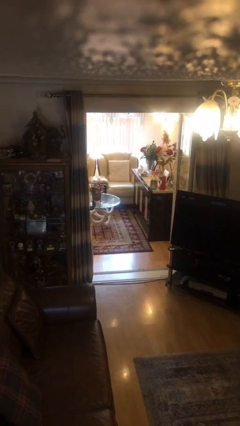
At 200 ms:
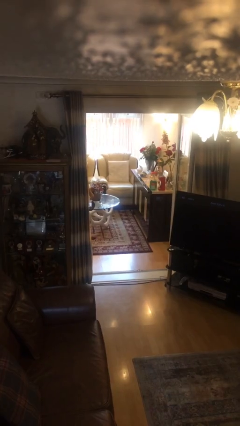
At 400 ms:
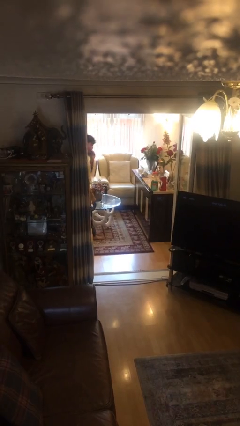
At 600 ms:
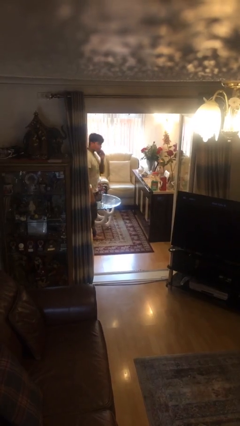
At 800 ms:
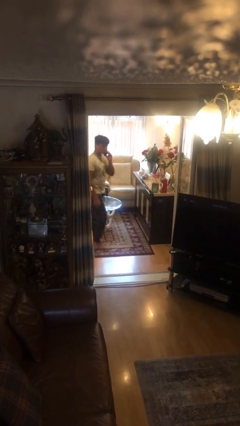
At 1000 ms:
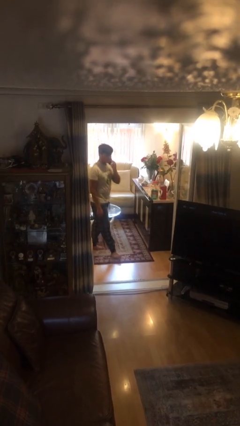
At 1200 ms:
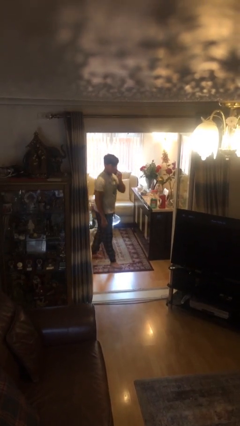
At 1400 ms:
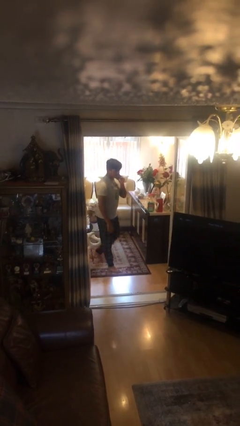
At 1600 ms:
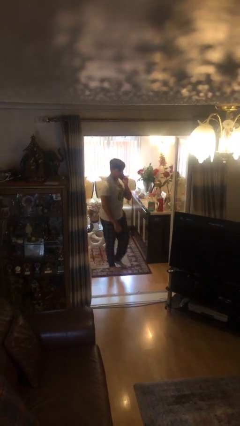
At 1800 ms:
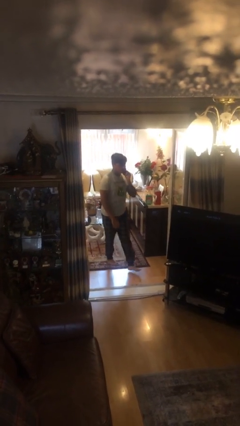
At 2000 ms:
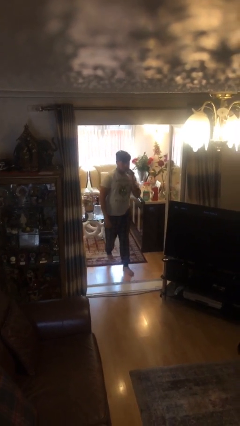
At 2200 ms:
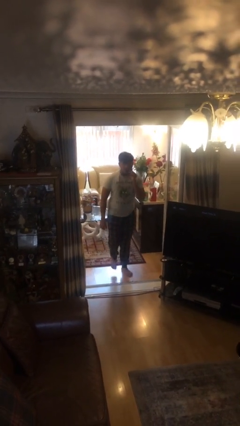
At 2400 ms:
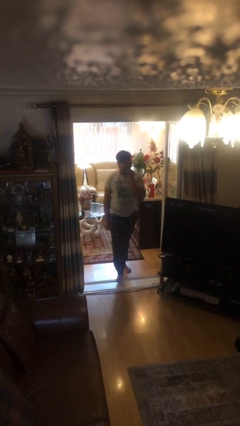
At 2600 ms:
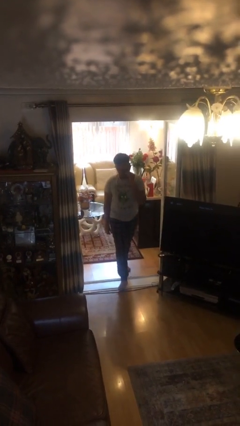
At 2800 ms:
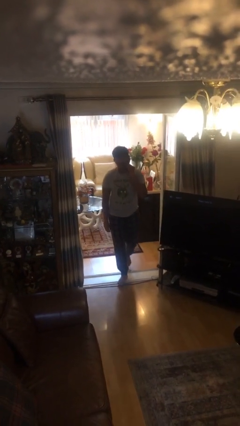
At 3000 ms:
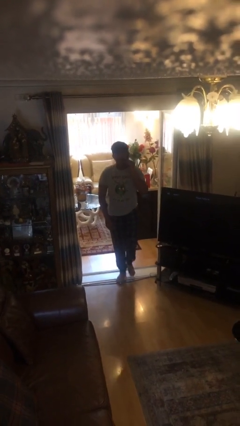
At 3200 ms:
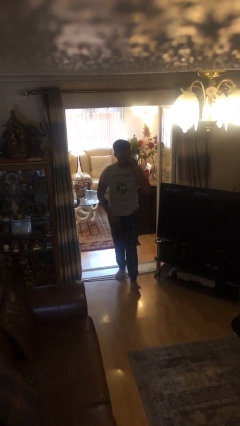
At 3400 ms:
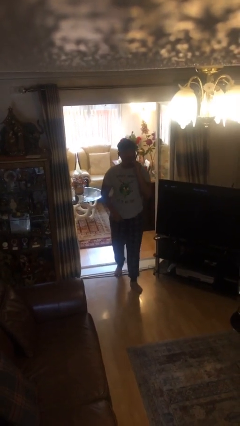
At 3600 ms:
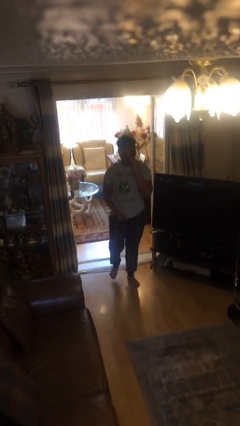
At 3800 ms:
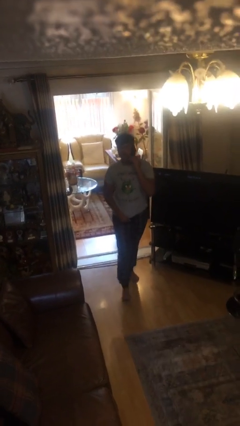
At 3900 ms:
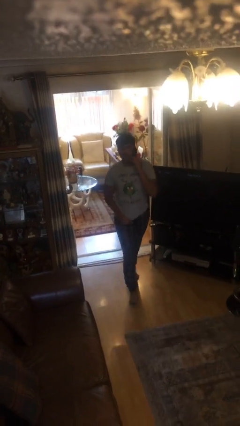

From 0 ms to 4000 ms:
person enters scene through structure

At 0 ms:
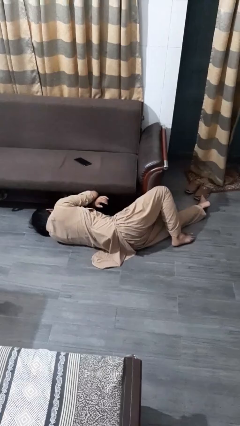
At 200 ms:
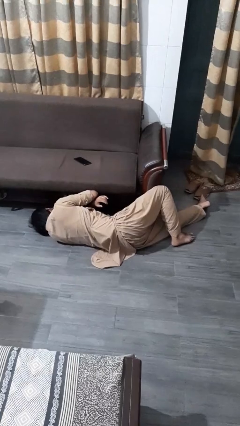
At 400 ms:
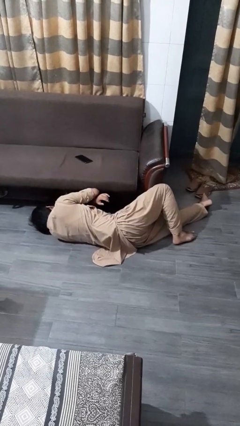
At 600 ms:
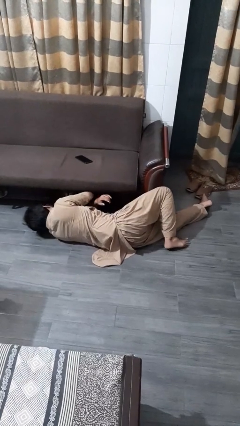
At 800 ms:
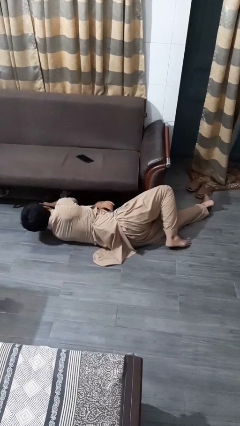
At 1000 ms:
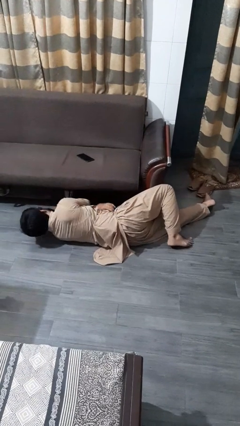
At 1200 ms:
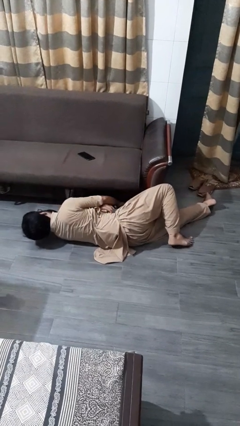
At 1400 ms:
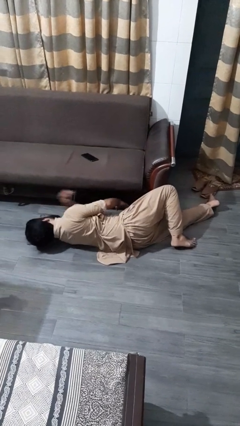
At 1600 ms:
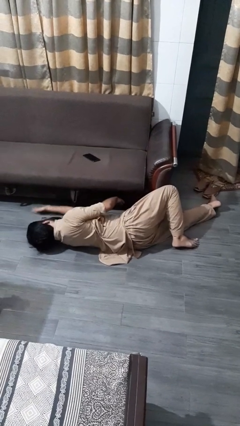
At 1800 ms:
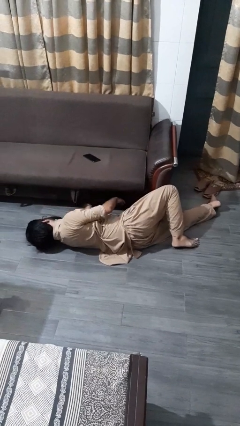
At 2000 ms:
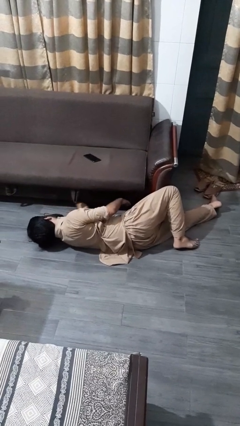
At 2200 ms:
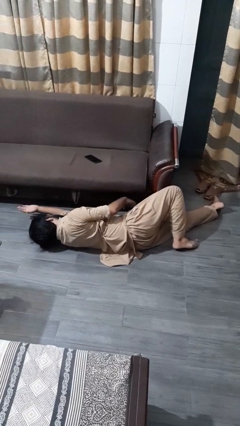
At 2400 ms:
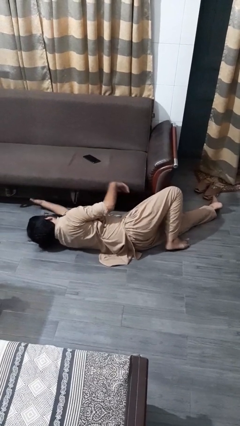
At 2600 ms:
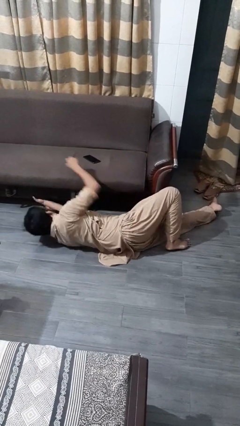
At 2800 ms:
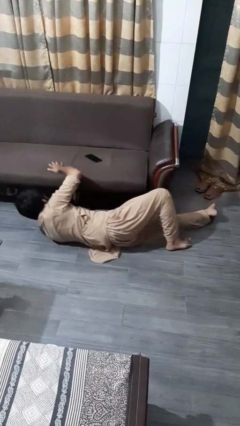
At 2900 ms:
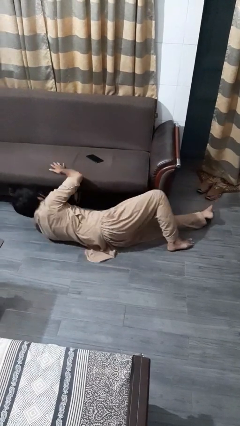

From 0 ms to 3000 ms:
person searches under couch

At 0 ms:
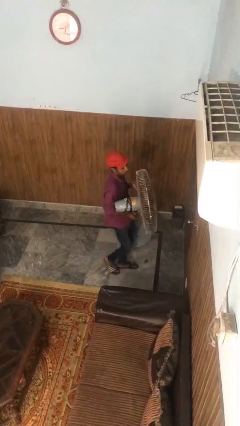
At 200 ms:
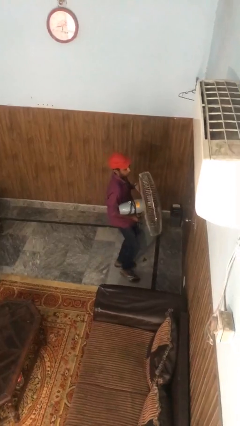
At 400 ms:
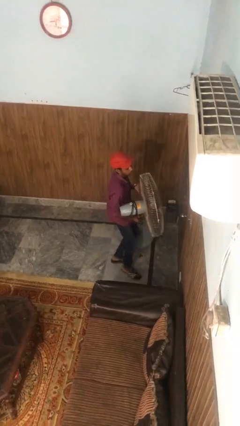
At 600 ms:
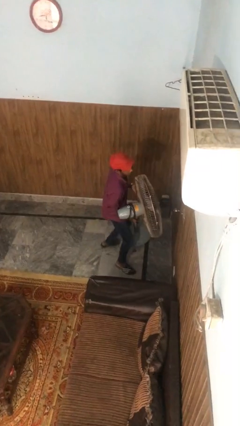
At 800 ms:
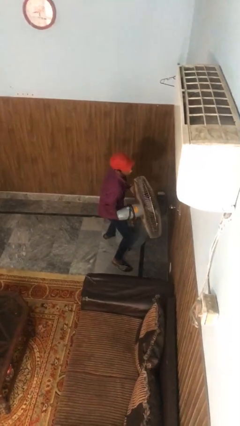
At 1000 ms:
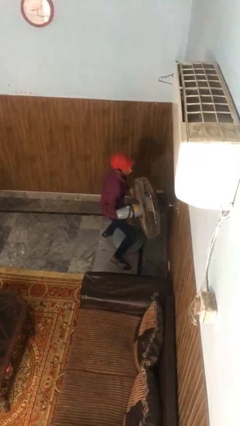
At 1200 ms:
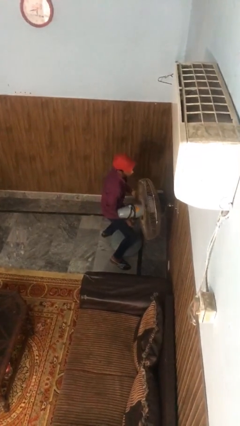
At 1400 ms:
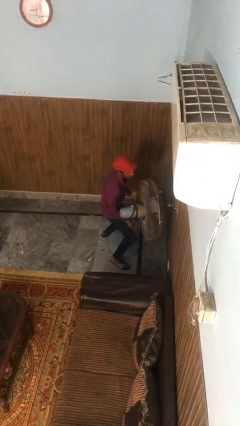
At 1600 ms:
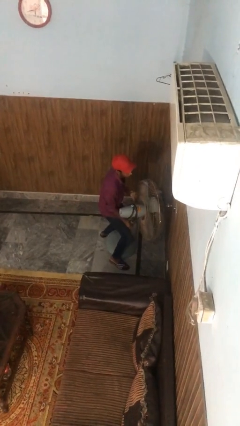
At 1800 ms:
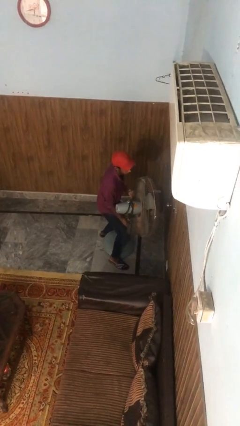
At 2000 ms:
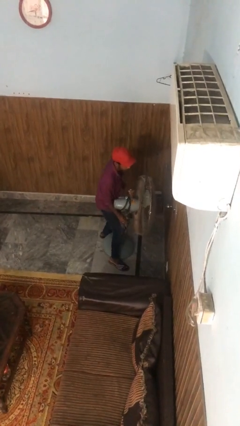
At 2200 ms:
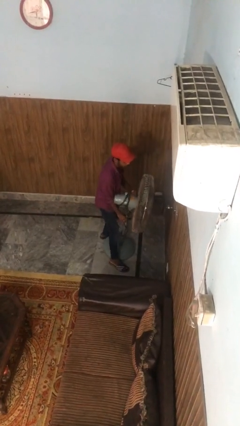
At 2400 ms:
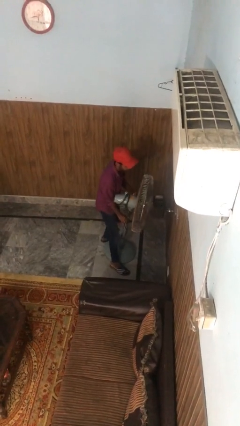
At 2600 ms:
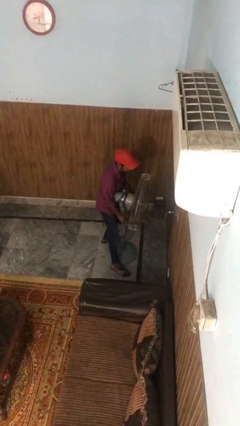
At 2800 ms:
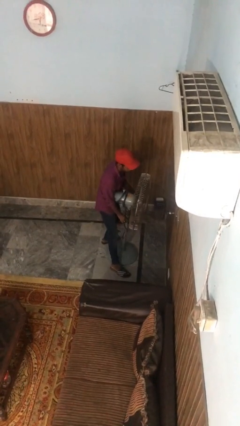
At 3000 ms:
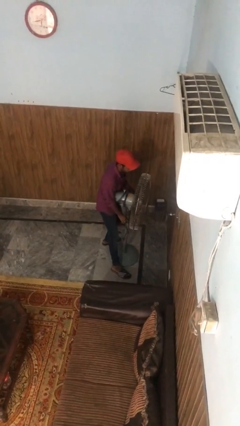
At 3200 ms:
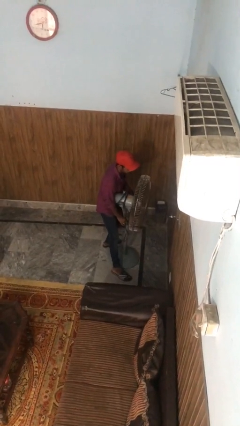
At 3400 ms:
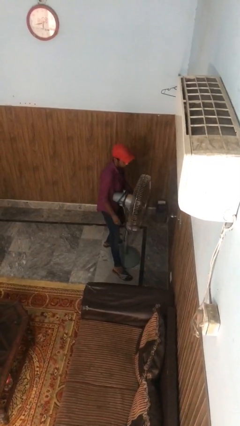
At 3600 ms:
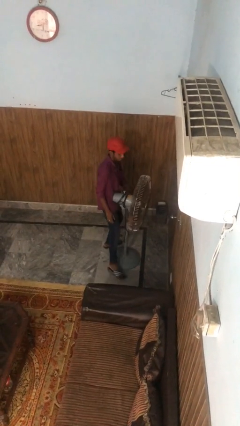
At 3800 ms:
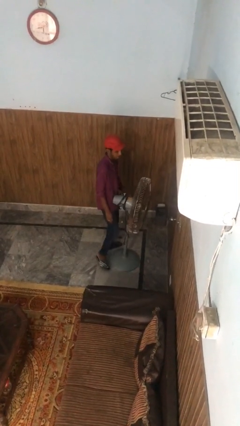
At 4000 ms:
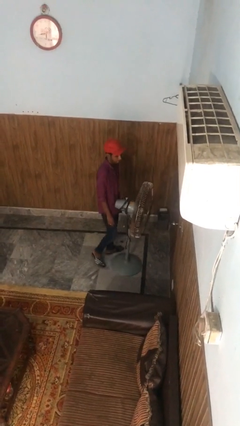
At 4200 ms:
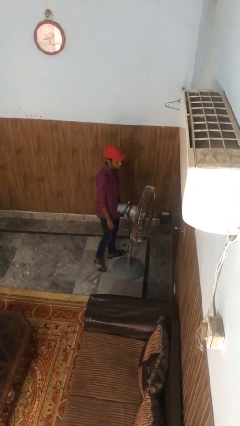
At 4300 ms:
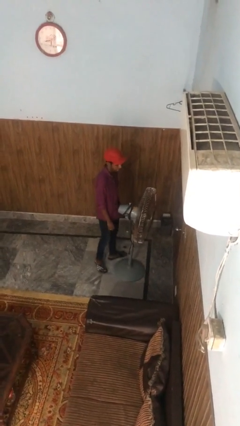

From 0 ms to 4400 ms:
person puts down object on floor

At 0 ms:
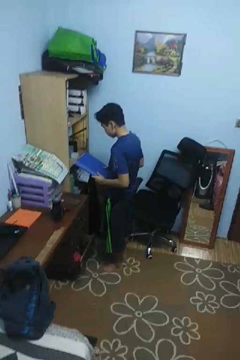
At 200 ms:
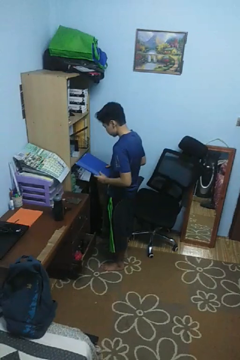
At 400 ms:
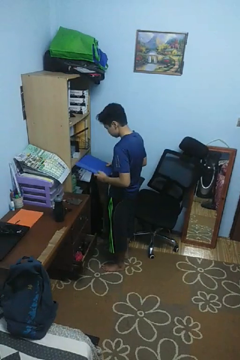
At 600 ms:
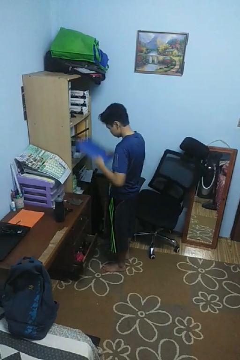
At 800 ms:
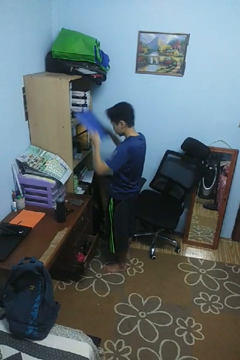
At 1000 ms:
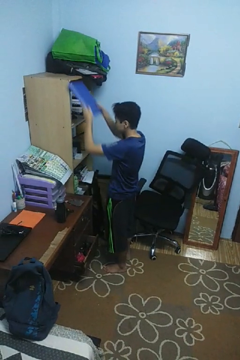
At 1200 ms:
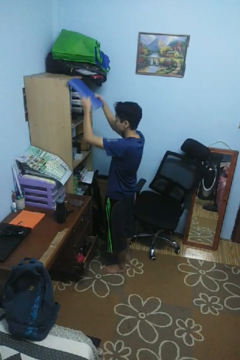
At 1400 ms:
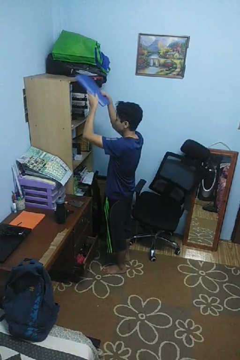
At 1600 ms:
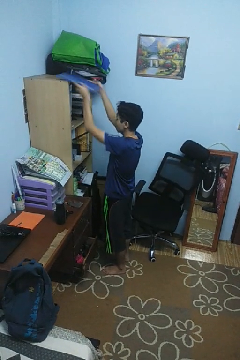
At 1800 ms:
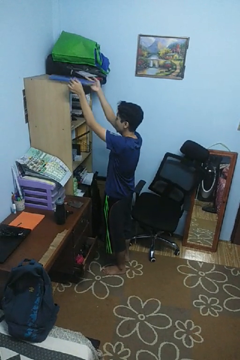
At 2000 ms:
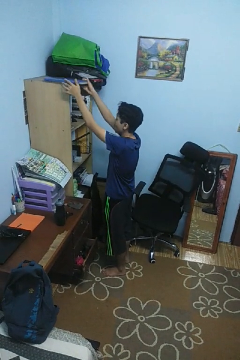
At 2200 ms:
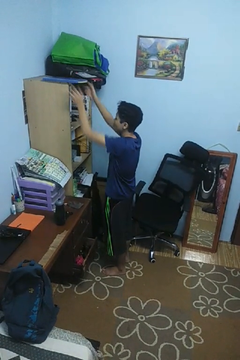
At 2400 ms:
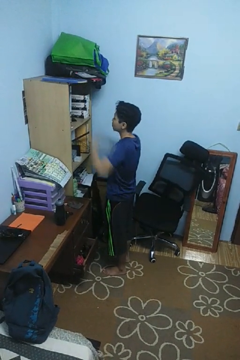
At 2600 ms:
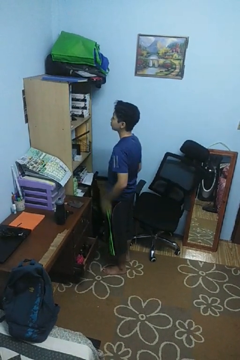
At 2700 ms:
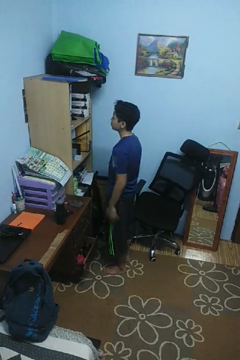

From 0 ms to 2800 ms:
person puts down object on shelf

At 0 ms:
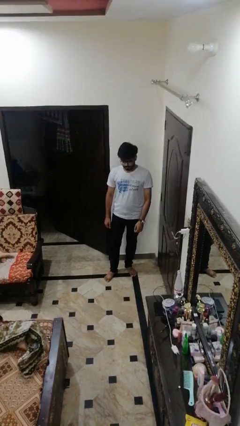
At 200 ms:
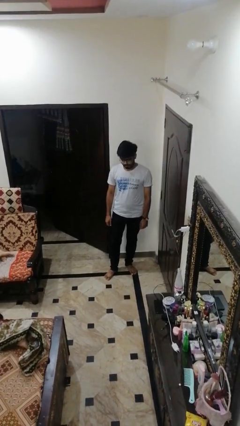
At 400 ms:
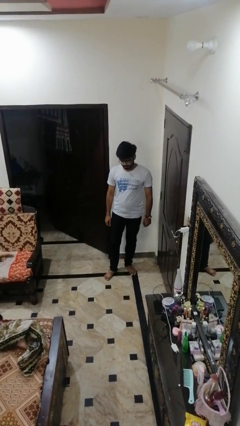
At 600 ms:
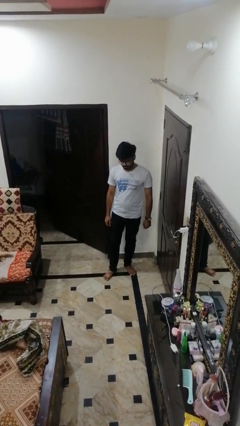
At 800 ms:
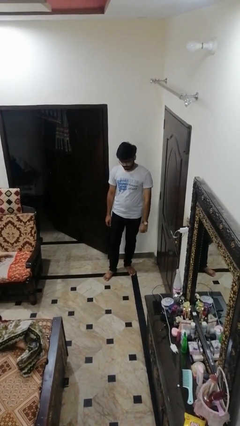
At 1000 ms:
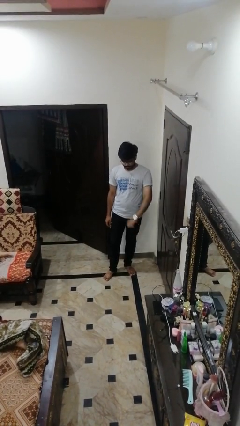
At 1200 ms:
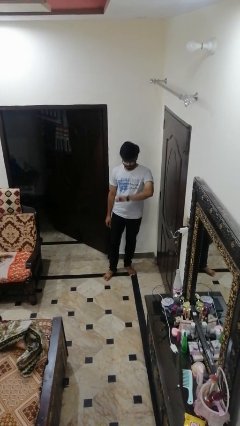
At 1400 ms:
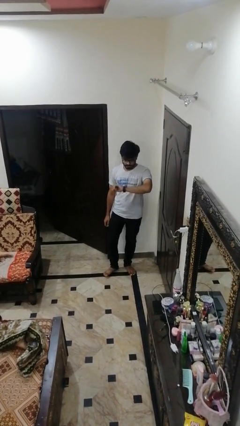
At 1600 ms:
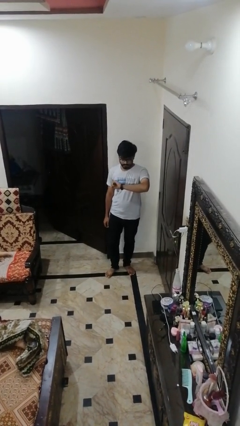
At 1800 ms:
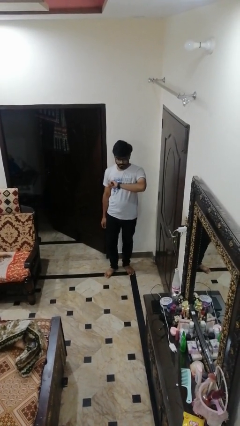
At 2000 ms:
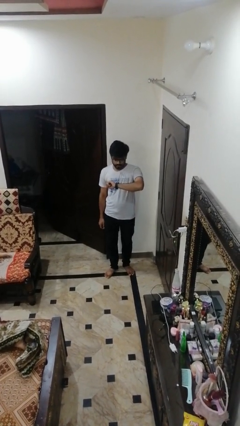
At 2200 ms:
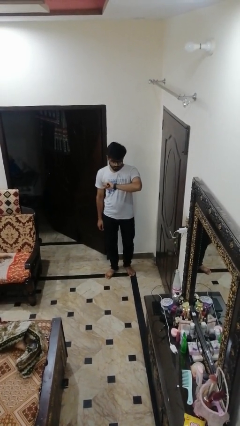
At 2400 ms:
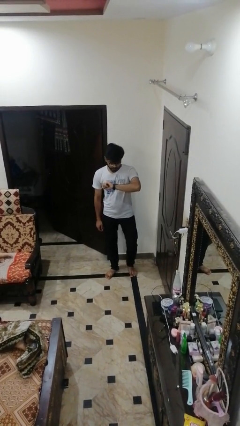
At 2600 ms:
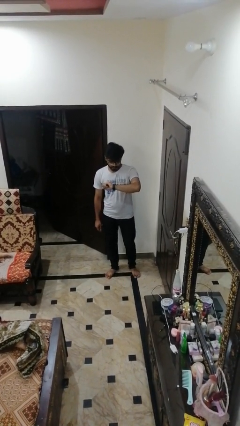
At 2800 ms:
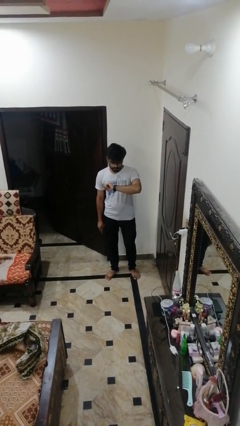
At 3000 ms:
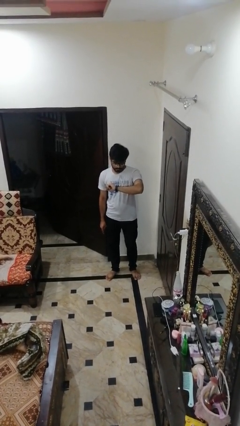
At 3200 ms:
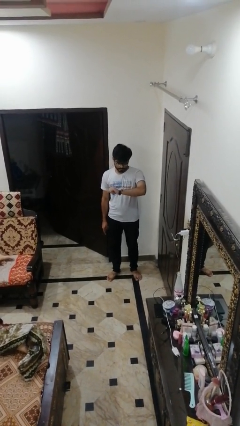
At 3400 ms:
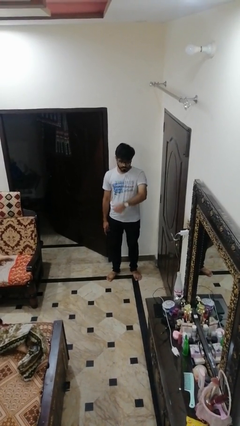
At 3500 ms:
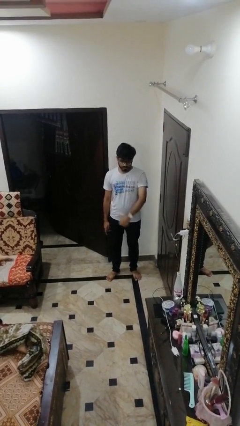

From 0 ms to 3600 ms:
person looks at wristwatch

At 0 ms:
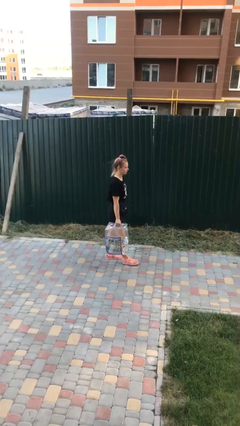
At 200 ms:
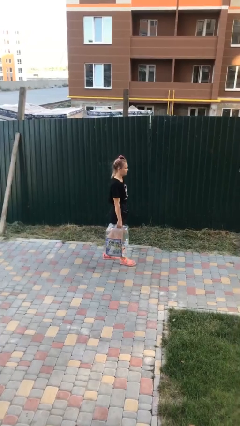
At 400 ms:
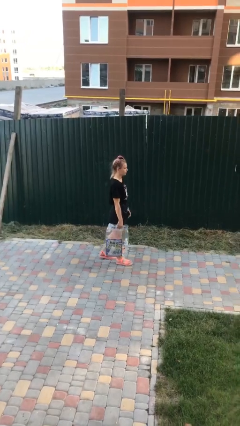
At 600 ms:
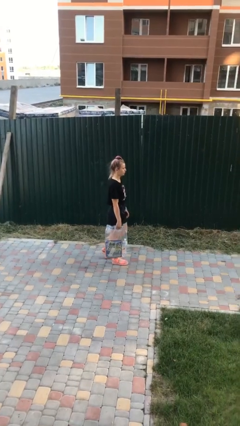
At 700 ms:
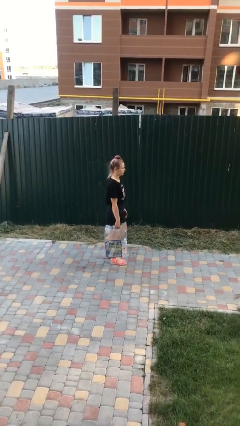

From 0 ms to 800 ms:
person carries groceries
